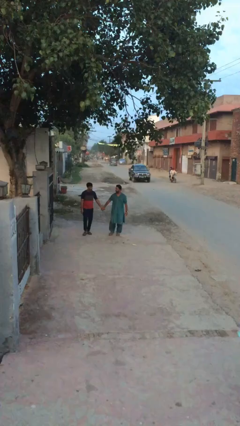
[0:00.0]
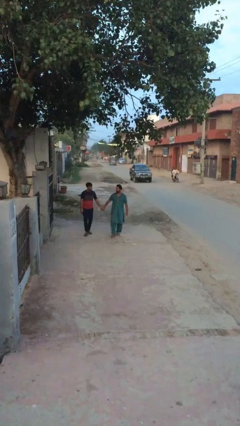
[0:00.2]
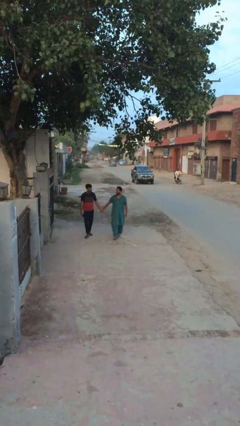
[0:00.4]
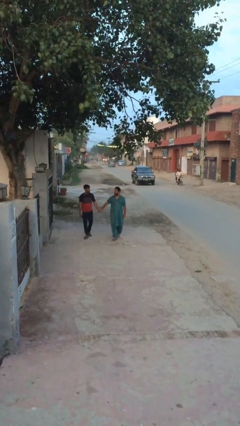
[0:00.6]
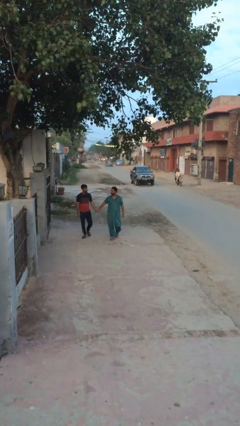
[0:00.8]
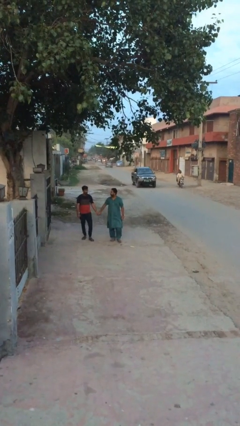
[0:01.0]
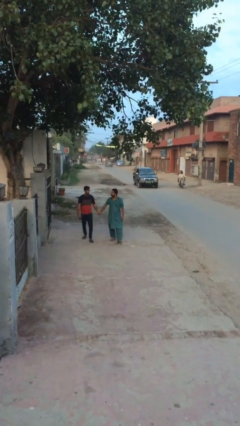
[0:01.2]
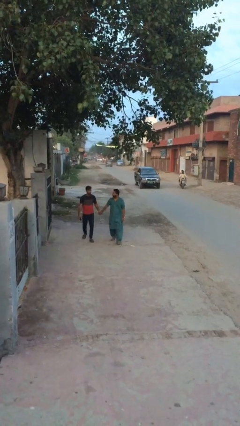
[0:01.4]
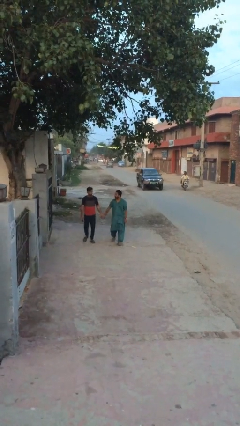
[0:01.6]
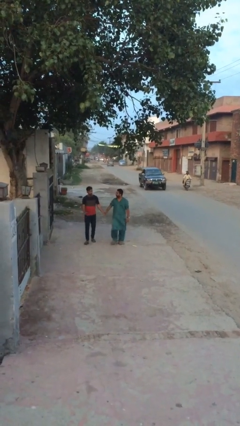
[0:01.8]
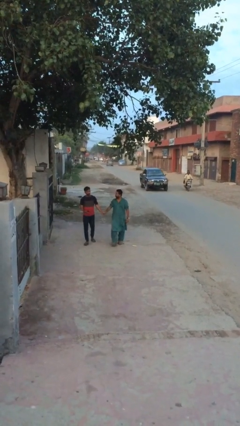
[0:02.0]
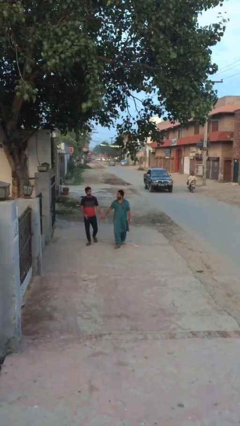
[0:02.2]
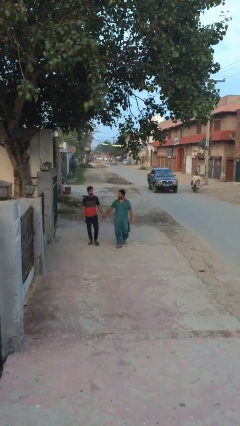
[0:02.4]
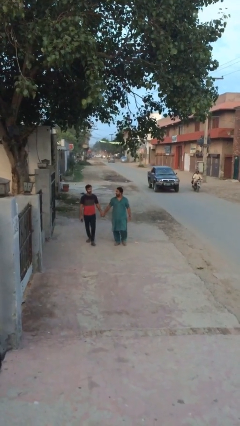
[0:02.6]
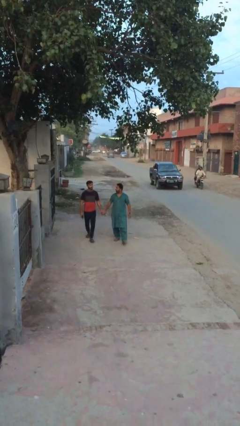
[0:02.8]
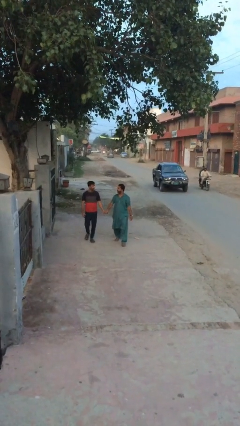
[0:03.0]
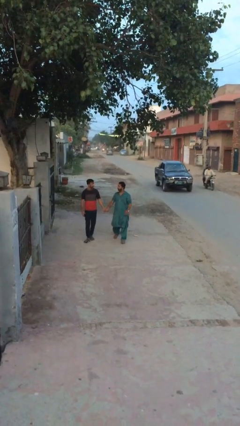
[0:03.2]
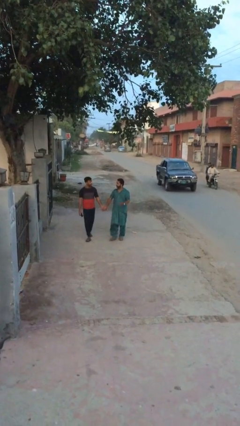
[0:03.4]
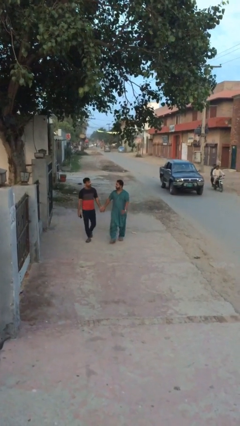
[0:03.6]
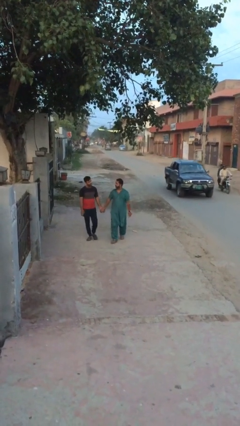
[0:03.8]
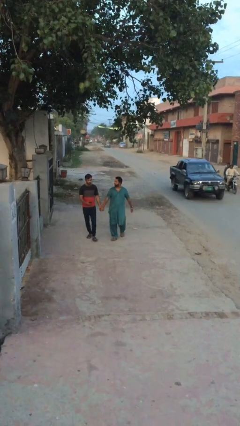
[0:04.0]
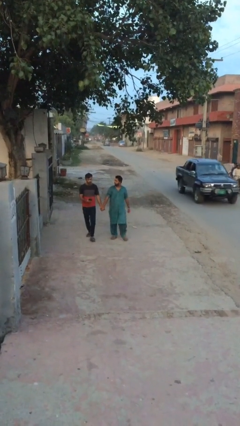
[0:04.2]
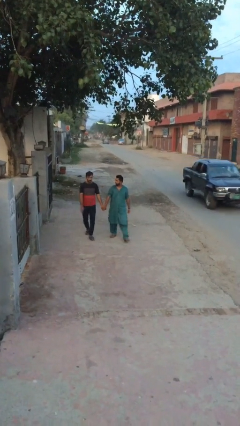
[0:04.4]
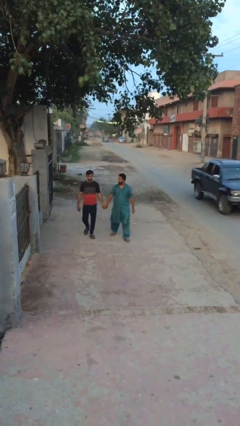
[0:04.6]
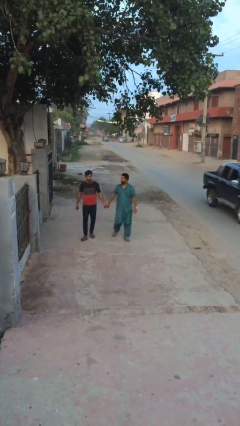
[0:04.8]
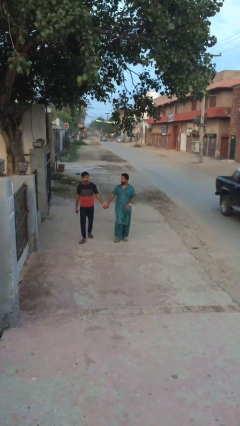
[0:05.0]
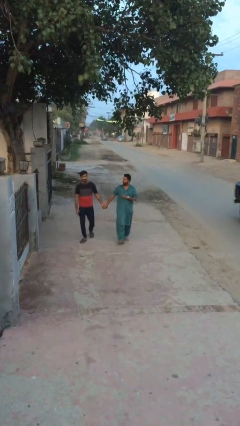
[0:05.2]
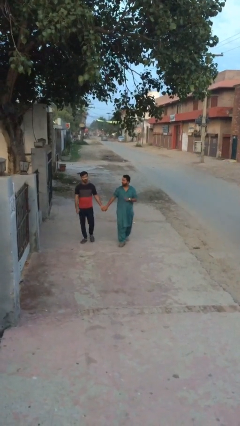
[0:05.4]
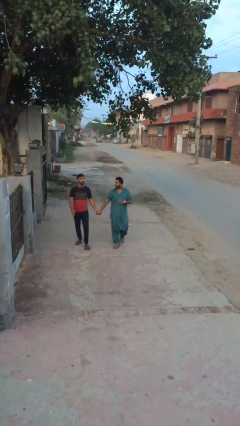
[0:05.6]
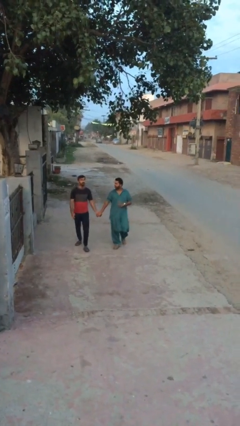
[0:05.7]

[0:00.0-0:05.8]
person holds hand

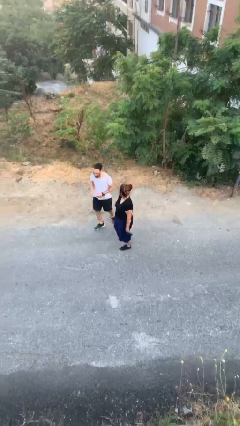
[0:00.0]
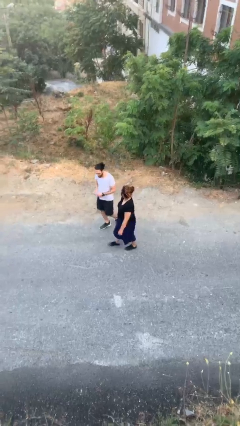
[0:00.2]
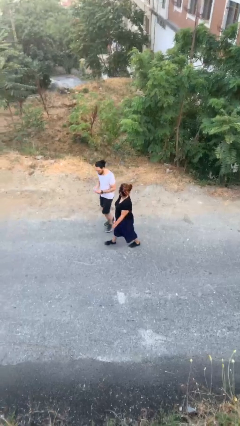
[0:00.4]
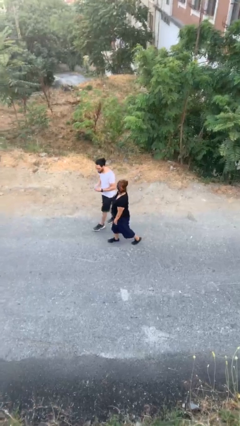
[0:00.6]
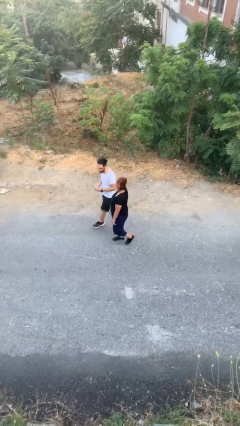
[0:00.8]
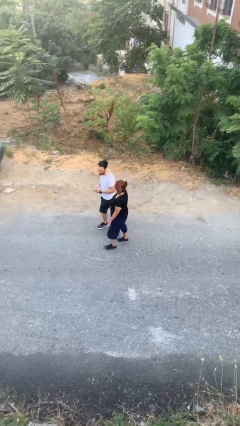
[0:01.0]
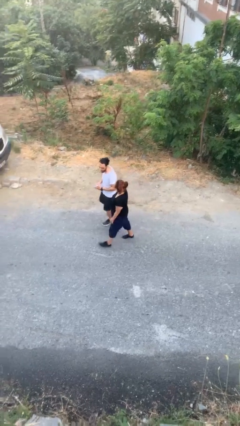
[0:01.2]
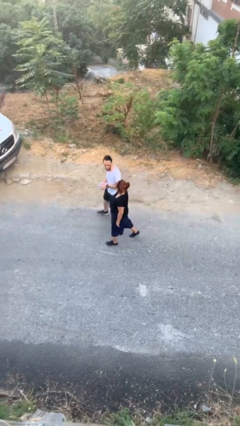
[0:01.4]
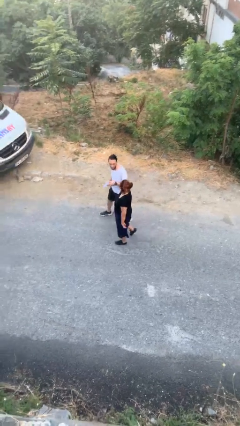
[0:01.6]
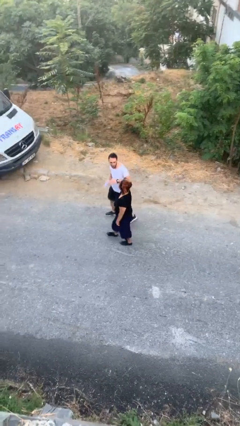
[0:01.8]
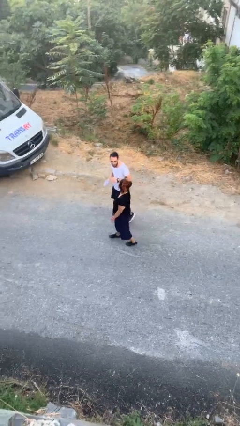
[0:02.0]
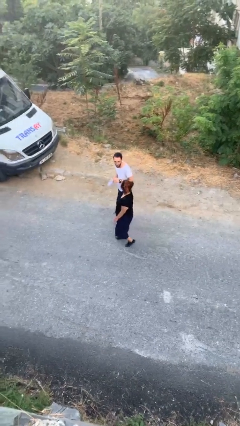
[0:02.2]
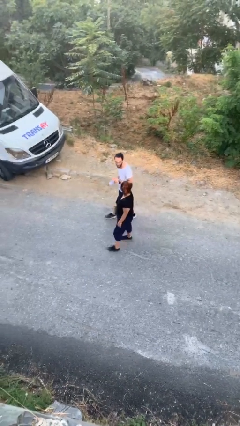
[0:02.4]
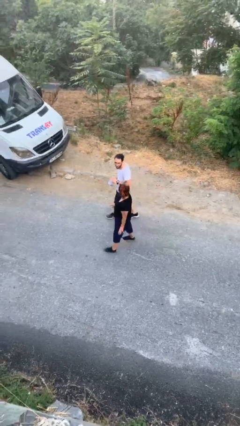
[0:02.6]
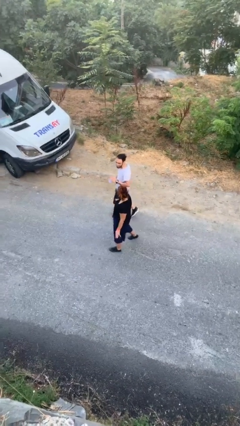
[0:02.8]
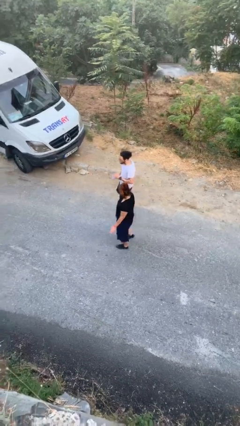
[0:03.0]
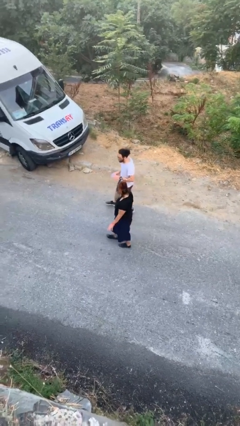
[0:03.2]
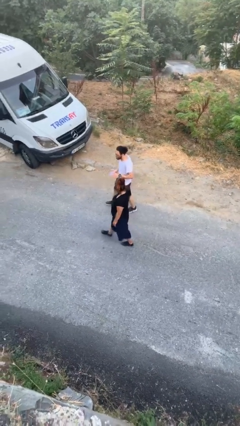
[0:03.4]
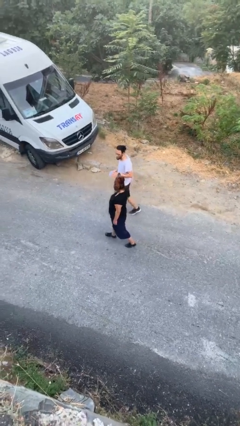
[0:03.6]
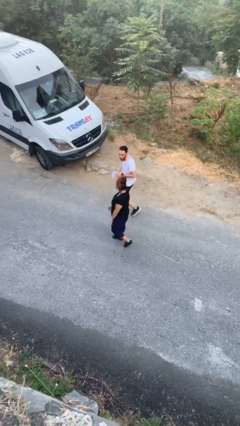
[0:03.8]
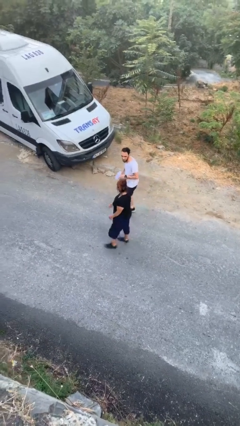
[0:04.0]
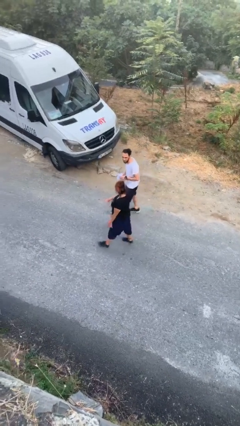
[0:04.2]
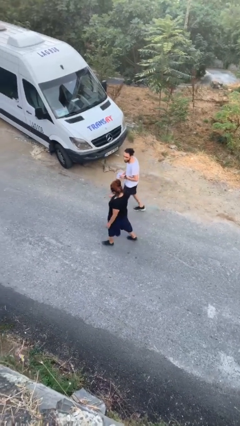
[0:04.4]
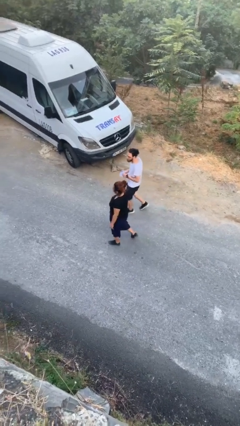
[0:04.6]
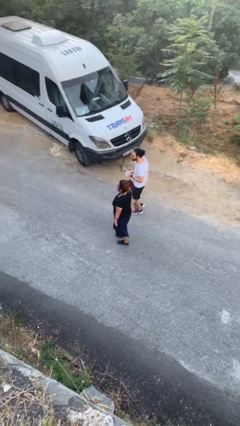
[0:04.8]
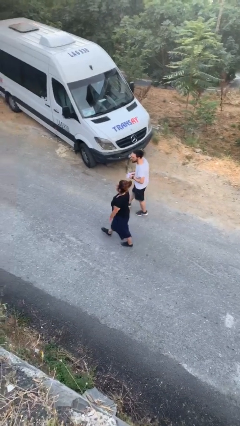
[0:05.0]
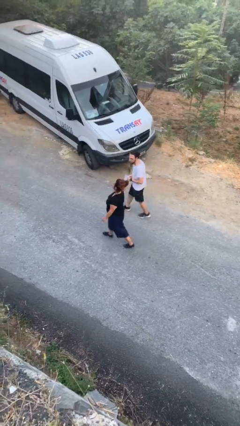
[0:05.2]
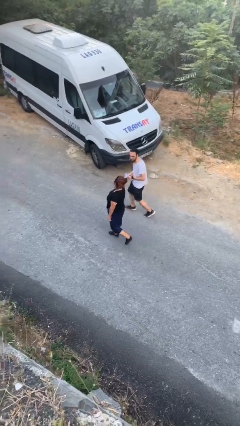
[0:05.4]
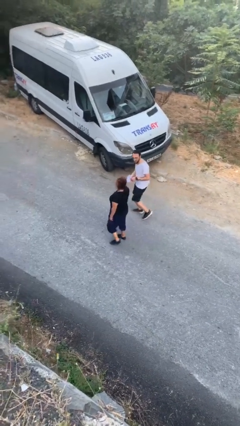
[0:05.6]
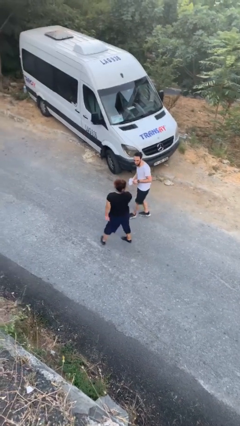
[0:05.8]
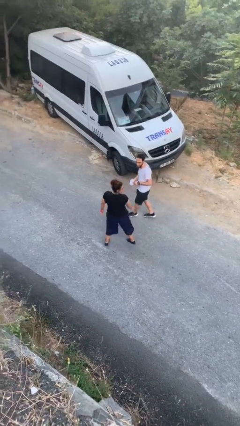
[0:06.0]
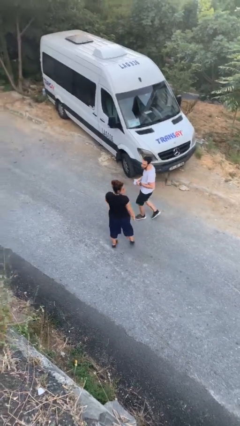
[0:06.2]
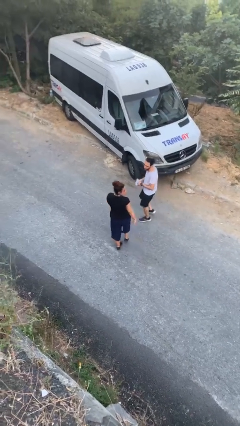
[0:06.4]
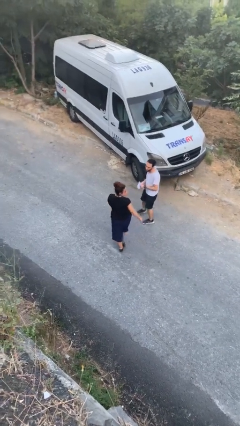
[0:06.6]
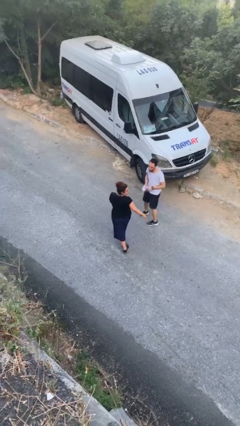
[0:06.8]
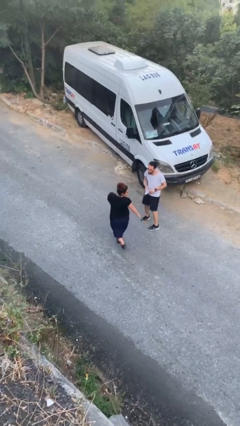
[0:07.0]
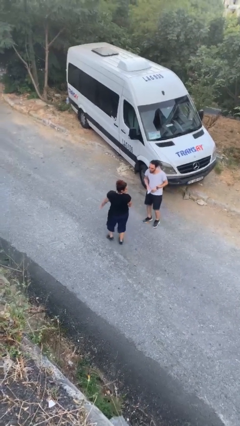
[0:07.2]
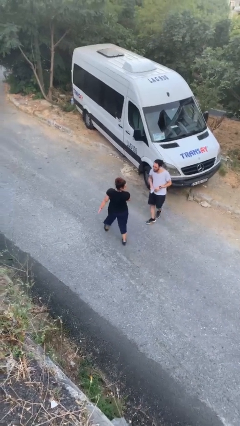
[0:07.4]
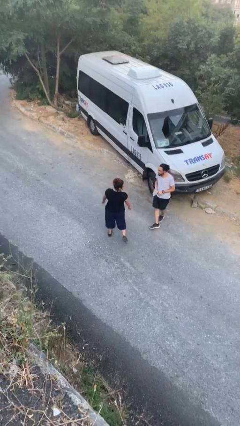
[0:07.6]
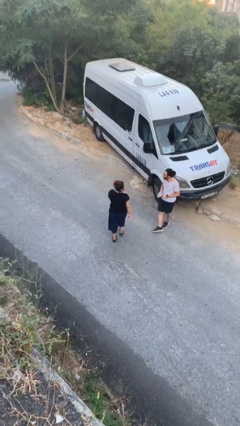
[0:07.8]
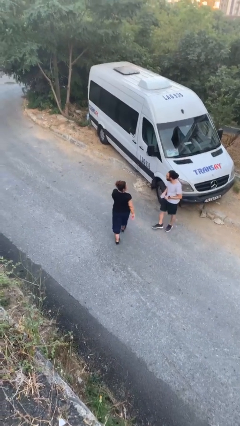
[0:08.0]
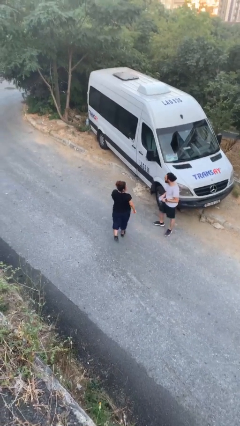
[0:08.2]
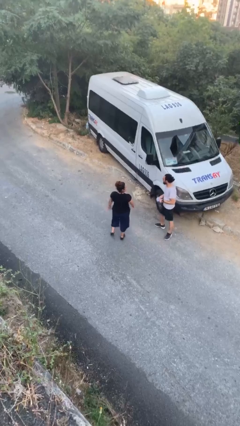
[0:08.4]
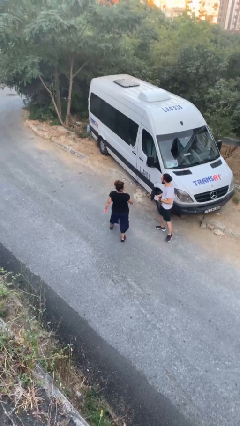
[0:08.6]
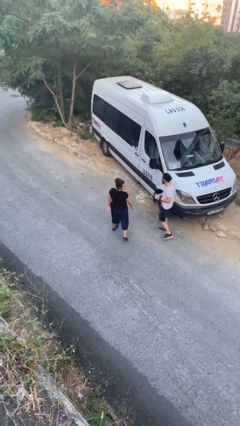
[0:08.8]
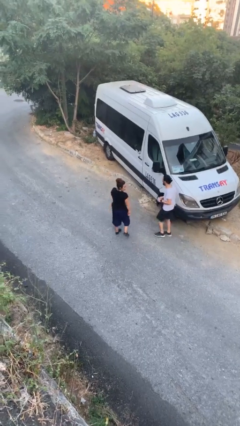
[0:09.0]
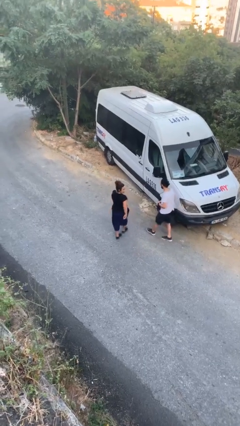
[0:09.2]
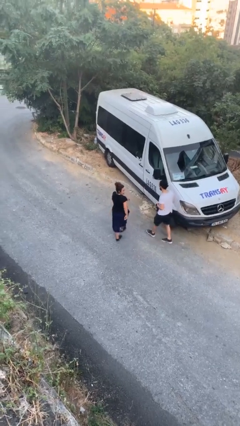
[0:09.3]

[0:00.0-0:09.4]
person talks to person

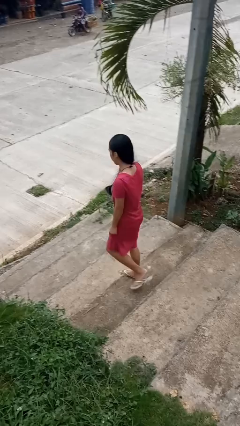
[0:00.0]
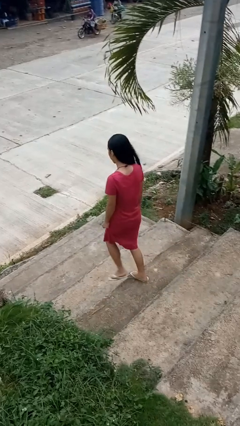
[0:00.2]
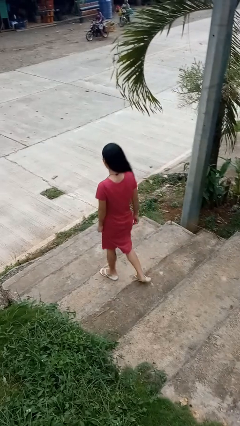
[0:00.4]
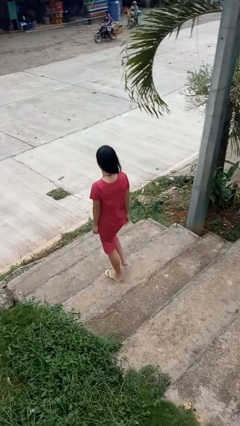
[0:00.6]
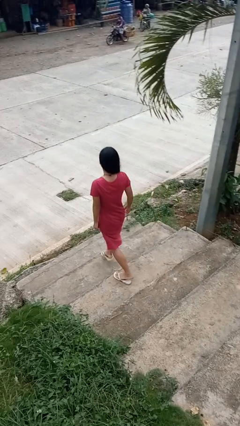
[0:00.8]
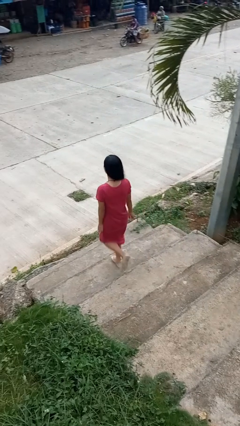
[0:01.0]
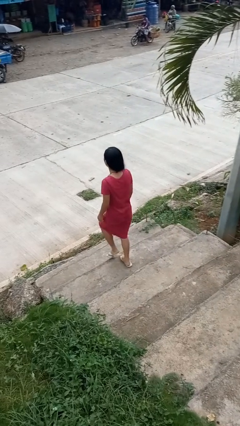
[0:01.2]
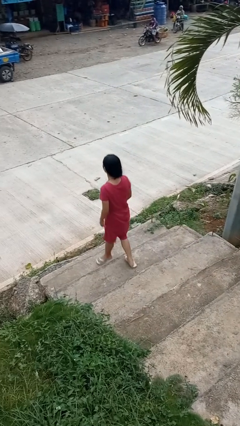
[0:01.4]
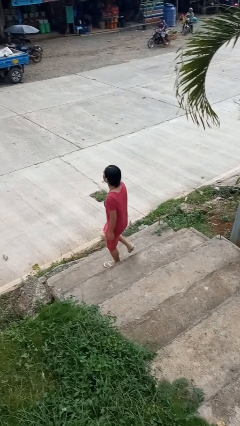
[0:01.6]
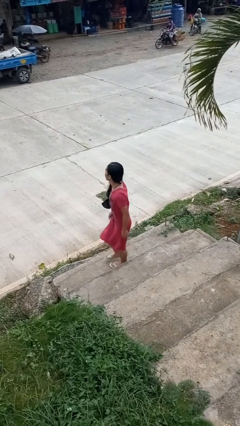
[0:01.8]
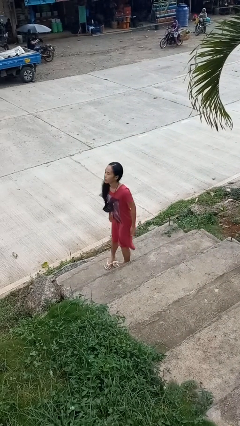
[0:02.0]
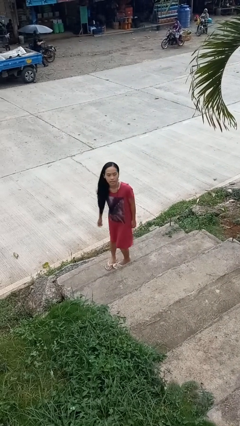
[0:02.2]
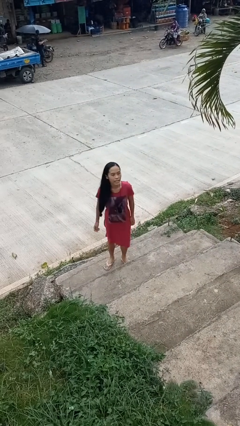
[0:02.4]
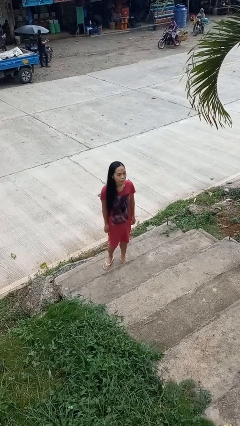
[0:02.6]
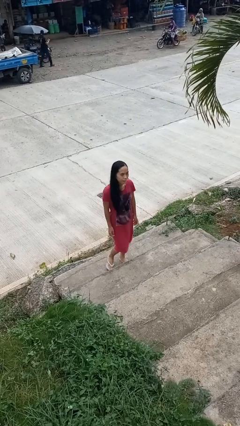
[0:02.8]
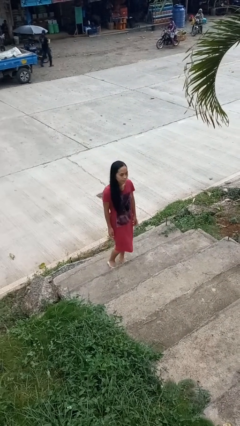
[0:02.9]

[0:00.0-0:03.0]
person climbs down stairs
